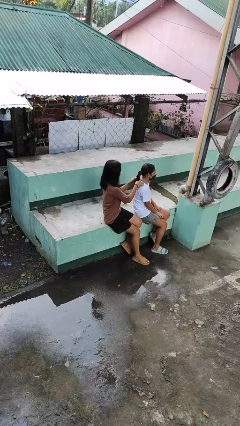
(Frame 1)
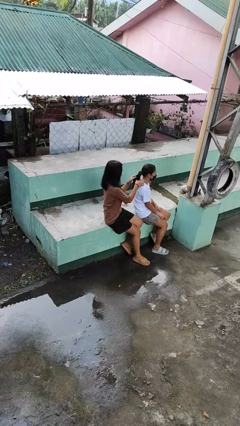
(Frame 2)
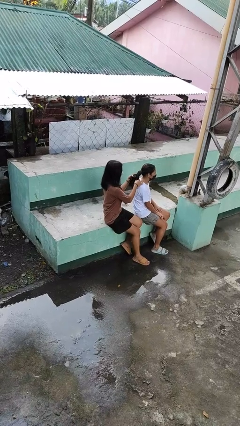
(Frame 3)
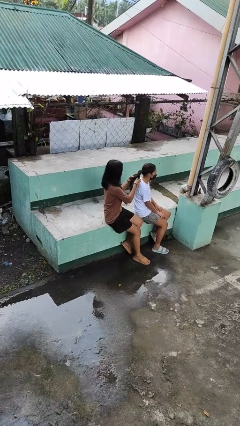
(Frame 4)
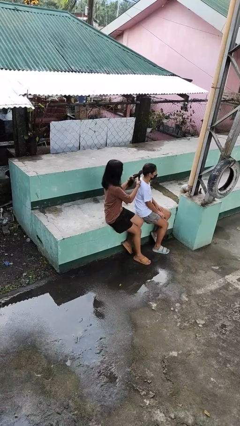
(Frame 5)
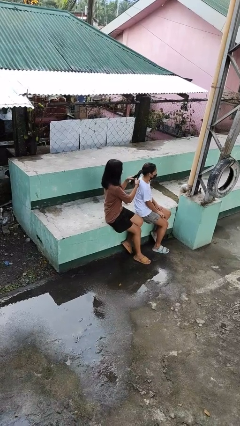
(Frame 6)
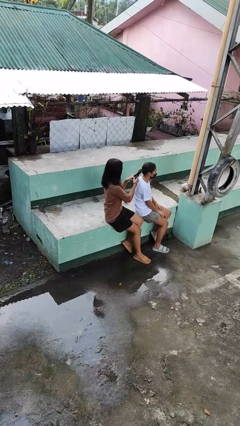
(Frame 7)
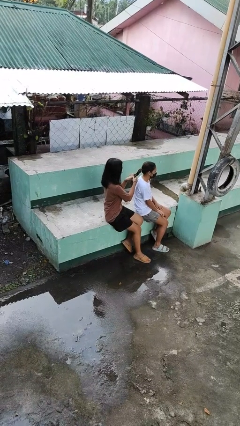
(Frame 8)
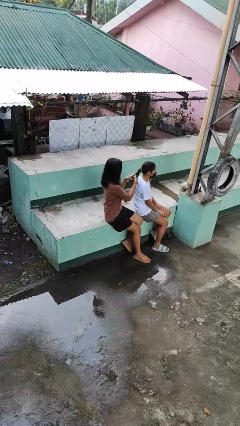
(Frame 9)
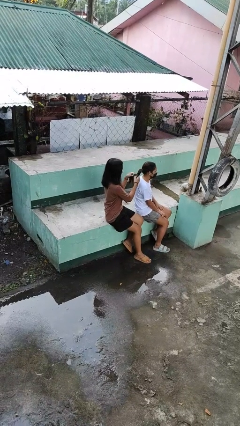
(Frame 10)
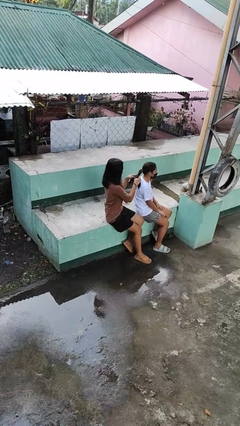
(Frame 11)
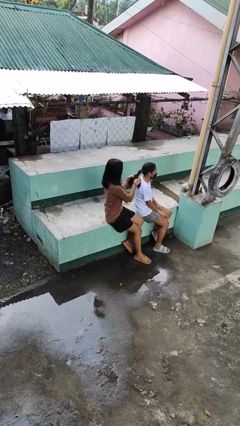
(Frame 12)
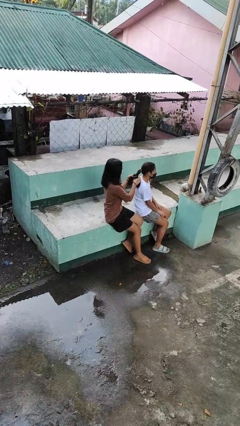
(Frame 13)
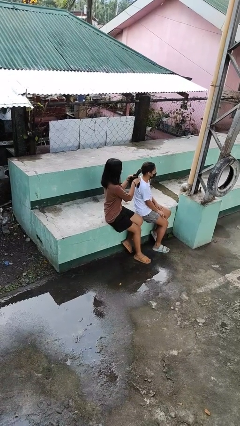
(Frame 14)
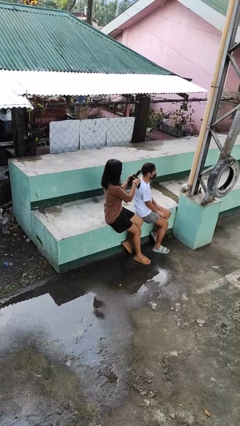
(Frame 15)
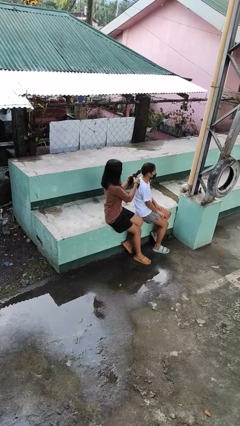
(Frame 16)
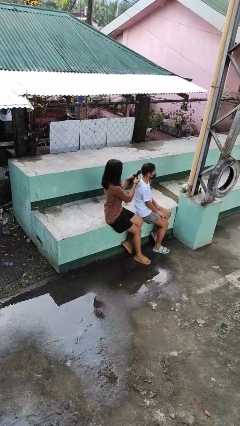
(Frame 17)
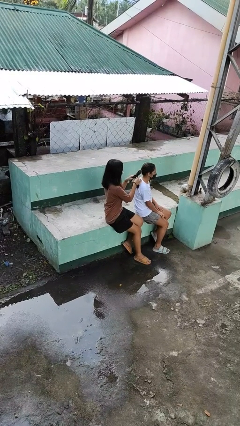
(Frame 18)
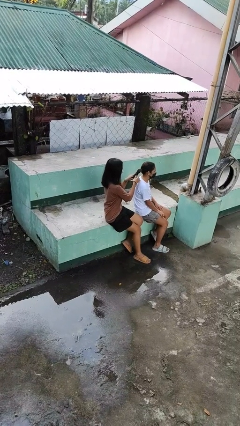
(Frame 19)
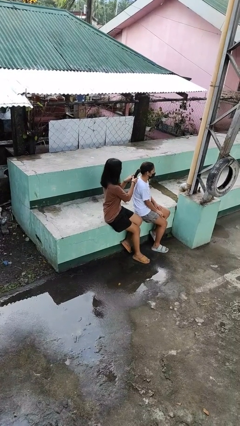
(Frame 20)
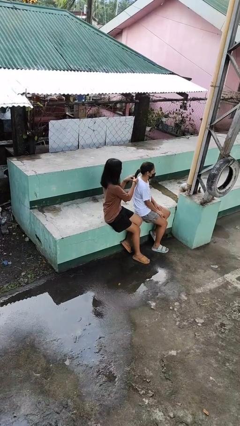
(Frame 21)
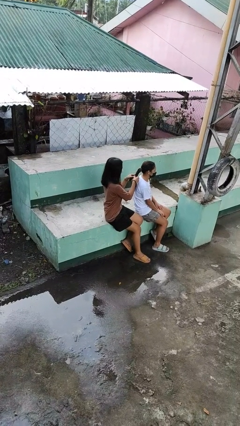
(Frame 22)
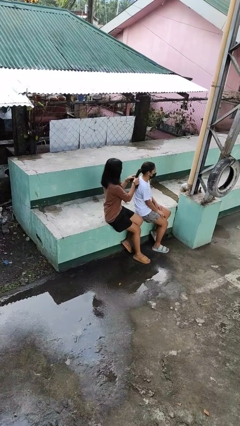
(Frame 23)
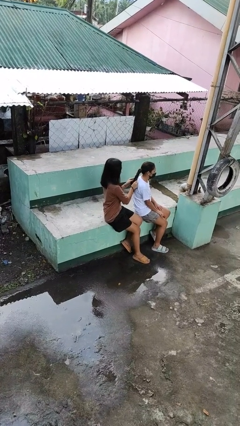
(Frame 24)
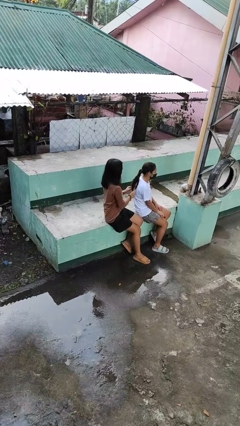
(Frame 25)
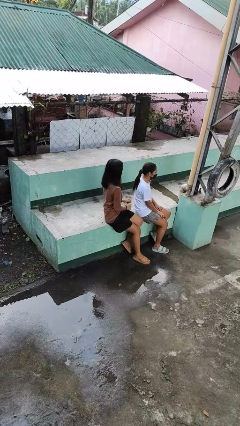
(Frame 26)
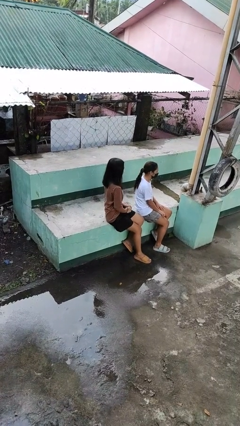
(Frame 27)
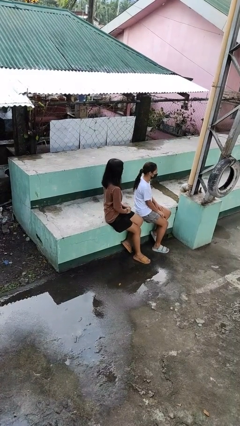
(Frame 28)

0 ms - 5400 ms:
person braids hair of person

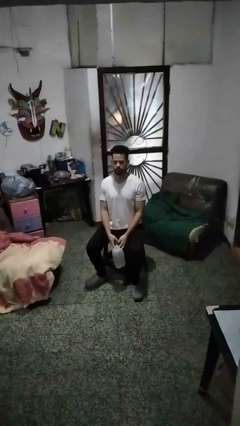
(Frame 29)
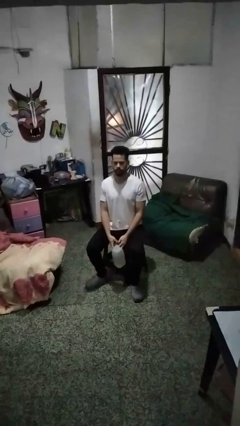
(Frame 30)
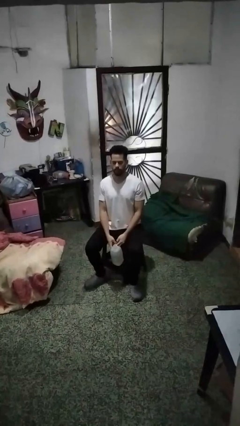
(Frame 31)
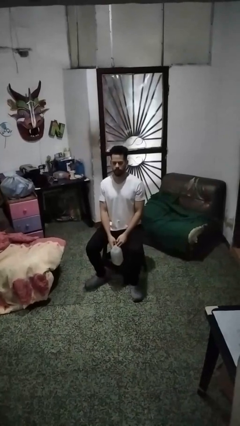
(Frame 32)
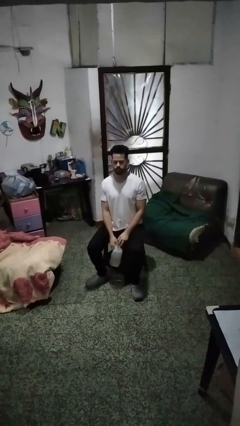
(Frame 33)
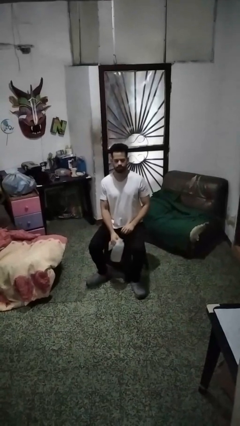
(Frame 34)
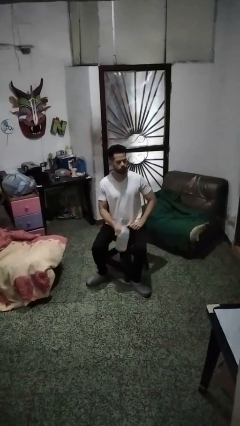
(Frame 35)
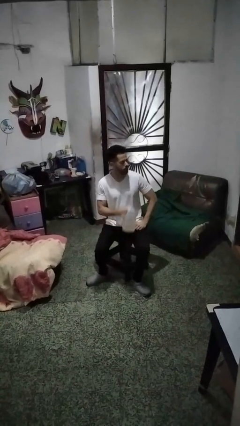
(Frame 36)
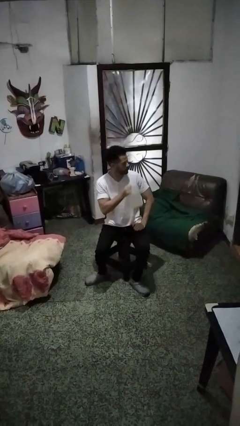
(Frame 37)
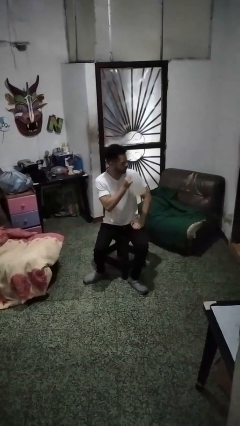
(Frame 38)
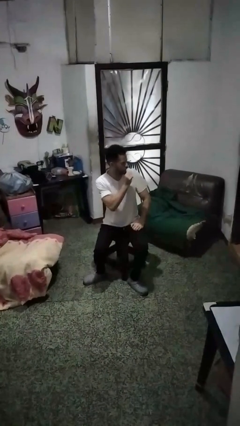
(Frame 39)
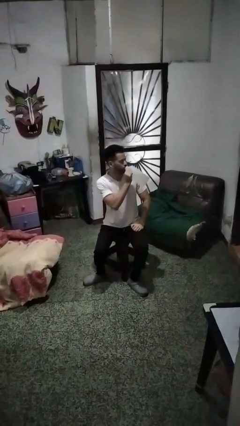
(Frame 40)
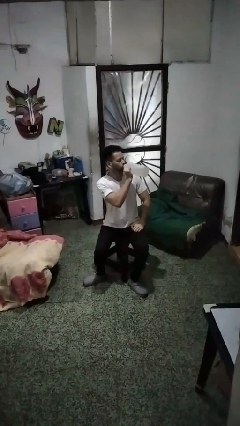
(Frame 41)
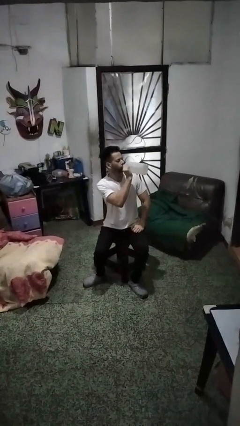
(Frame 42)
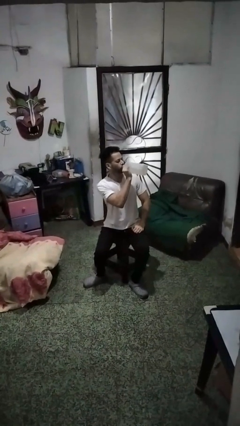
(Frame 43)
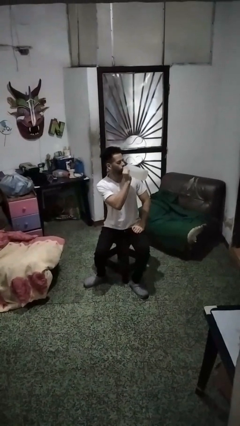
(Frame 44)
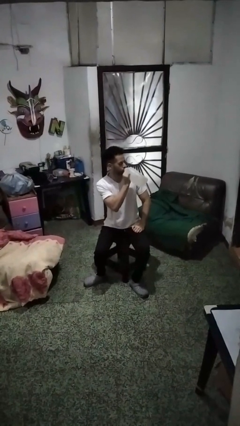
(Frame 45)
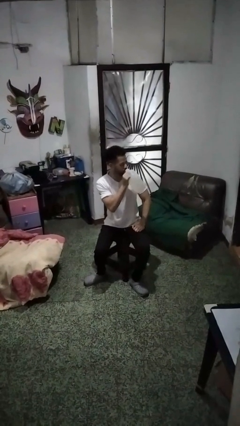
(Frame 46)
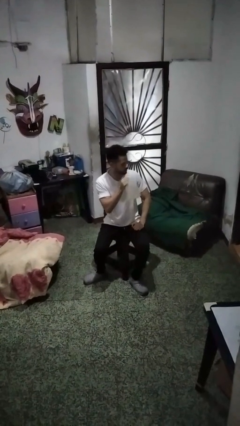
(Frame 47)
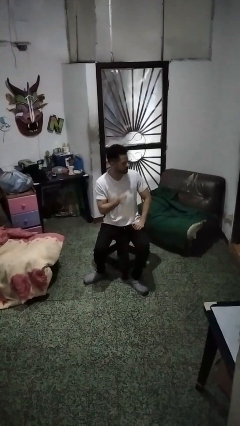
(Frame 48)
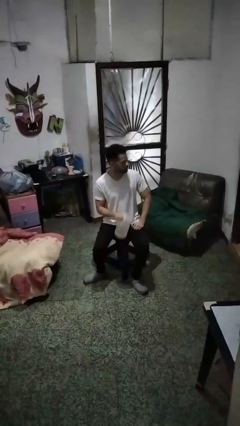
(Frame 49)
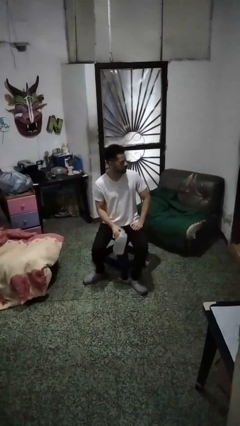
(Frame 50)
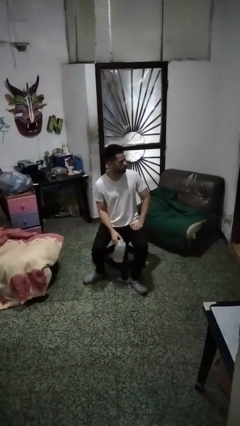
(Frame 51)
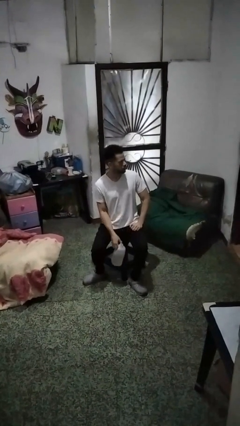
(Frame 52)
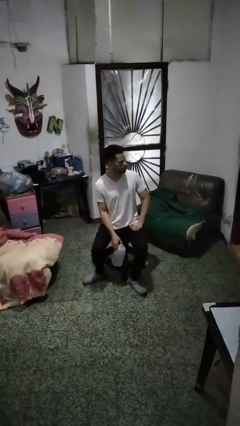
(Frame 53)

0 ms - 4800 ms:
person drinks from bottle

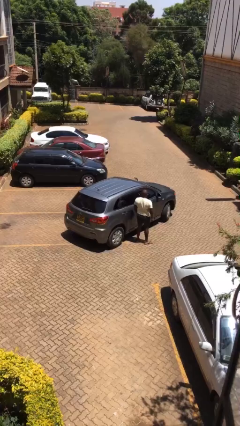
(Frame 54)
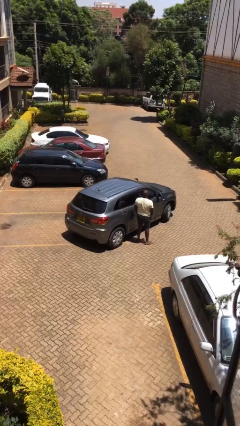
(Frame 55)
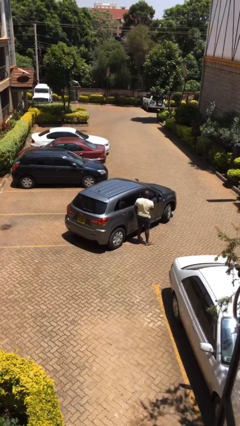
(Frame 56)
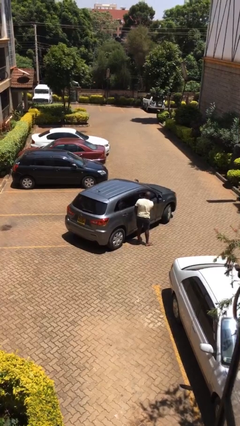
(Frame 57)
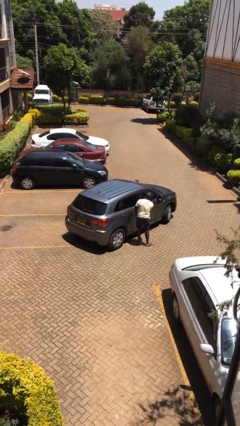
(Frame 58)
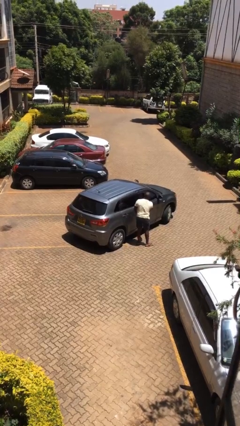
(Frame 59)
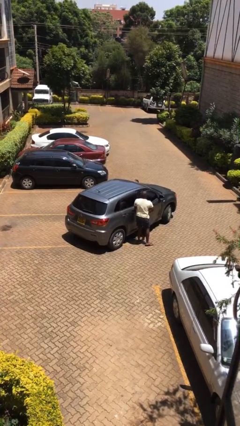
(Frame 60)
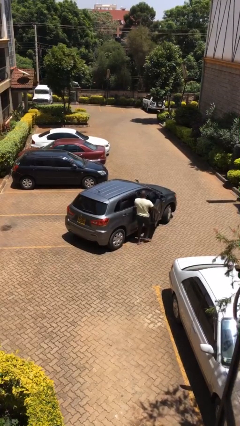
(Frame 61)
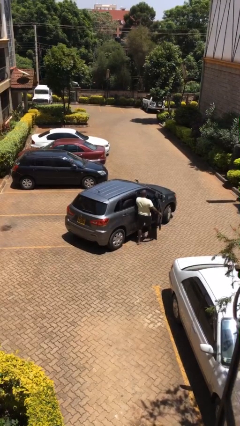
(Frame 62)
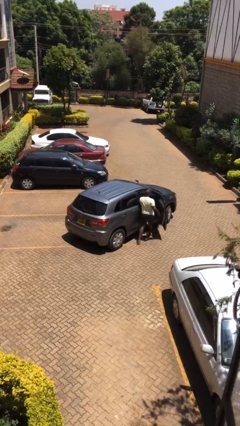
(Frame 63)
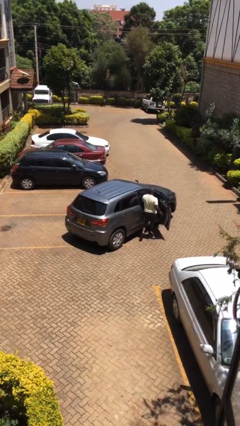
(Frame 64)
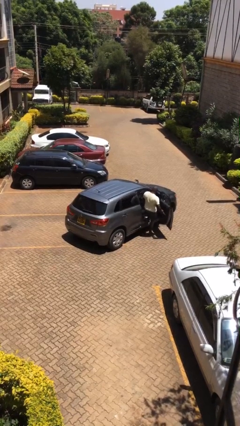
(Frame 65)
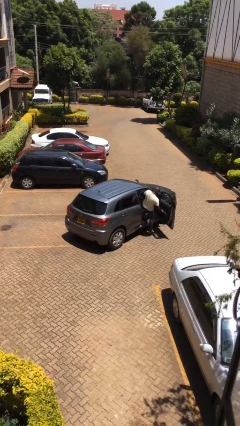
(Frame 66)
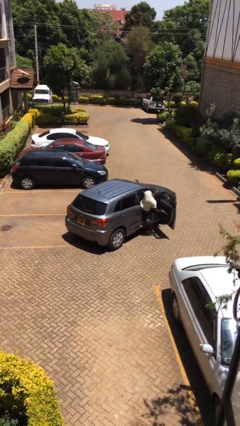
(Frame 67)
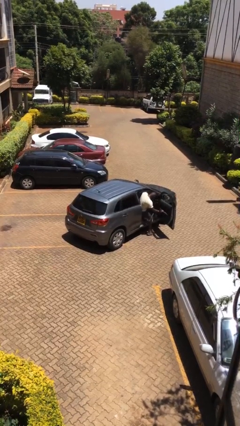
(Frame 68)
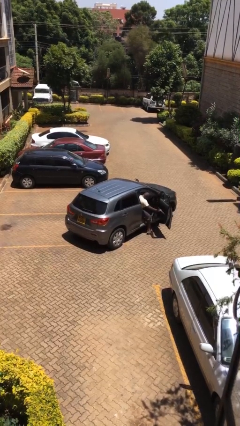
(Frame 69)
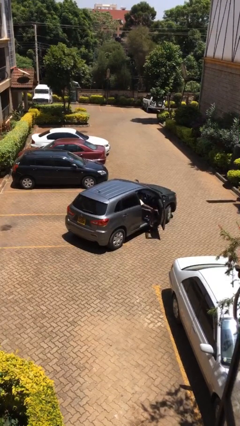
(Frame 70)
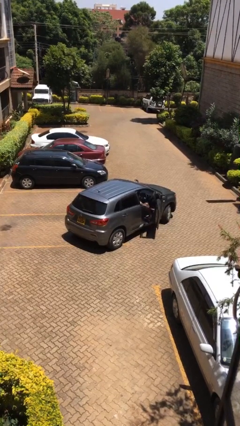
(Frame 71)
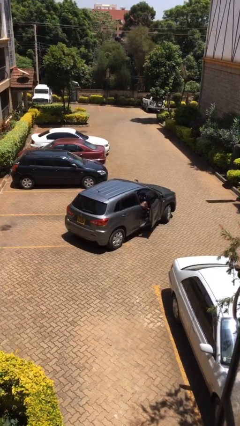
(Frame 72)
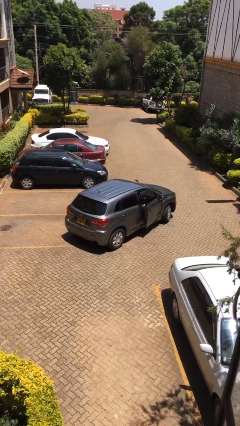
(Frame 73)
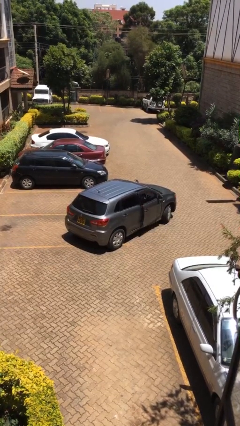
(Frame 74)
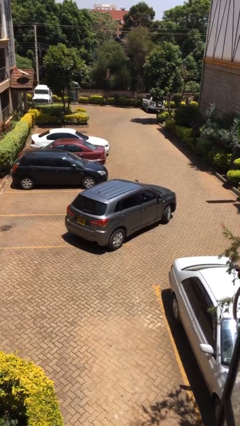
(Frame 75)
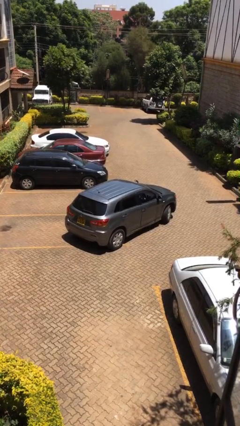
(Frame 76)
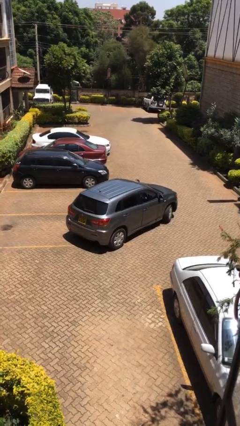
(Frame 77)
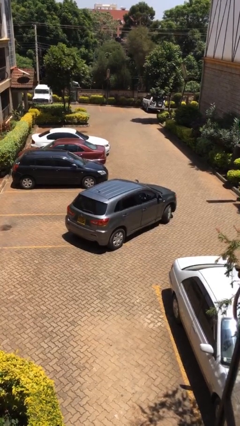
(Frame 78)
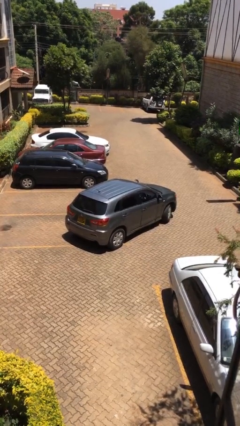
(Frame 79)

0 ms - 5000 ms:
car picks up person

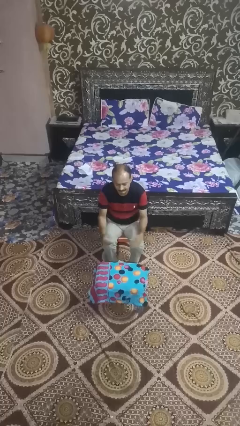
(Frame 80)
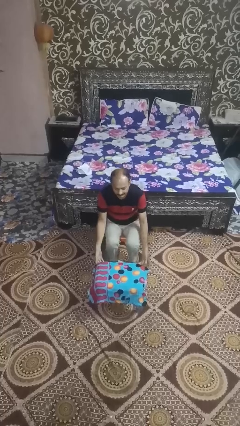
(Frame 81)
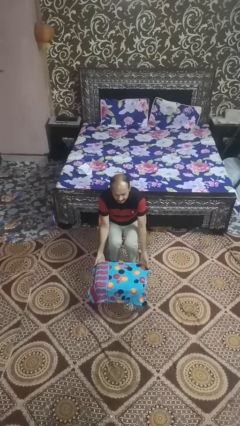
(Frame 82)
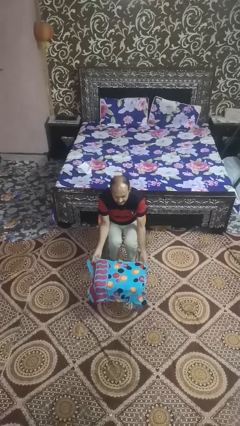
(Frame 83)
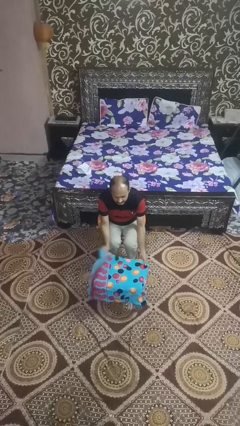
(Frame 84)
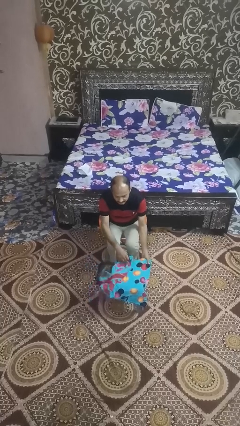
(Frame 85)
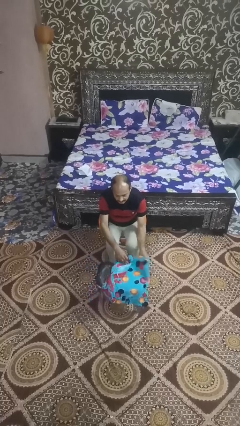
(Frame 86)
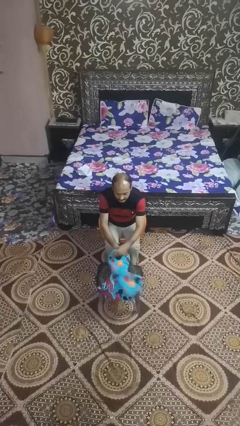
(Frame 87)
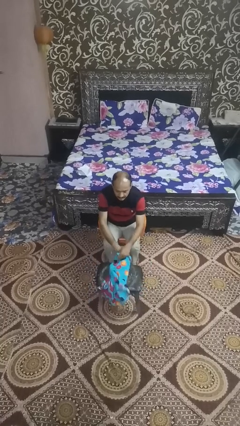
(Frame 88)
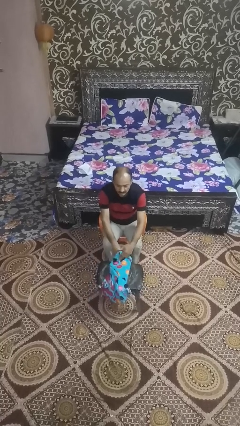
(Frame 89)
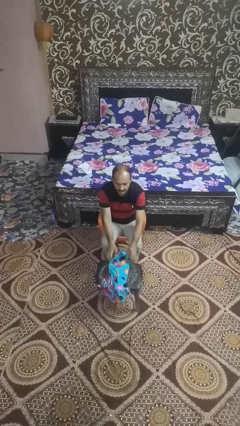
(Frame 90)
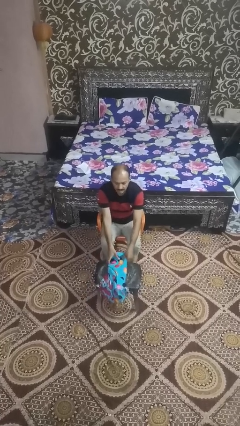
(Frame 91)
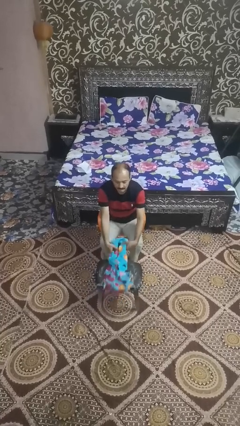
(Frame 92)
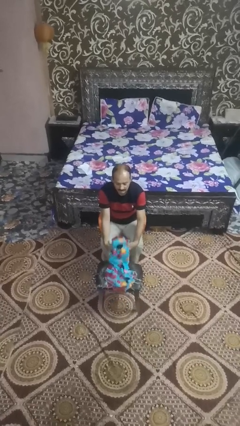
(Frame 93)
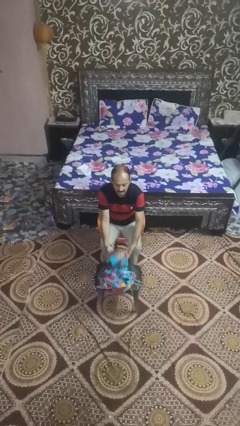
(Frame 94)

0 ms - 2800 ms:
person folds tablecloth
